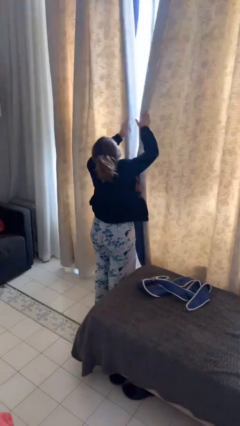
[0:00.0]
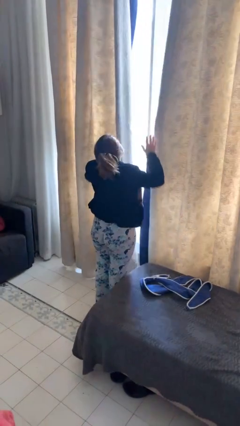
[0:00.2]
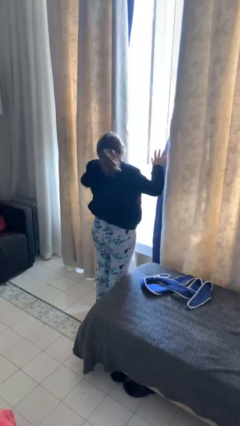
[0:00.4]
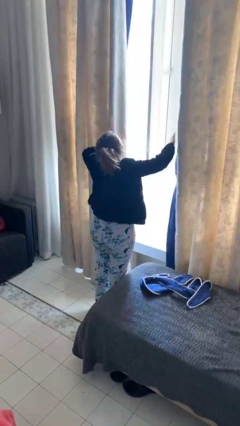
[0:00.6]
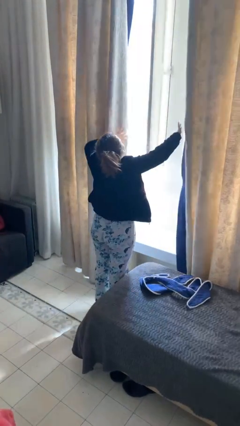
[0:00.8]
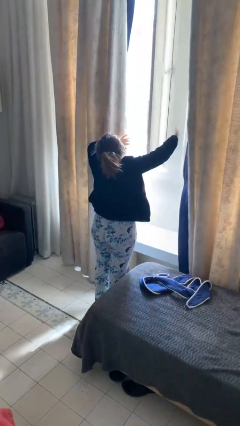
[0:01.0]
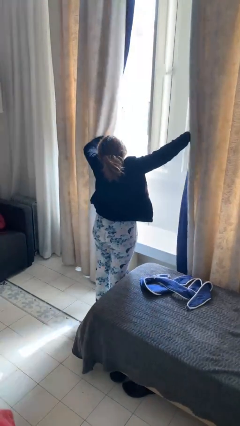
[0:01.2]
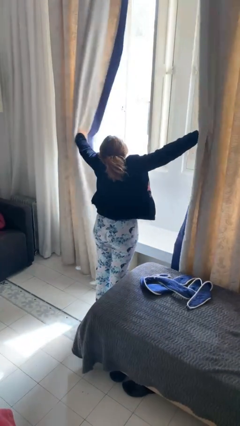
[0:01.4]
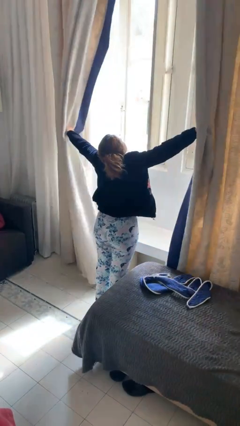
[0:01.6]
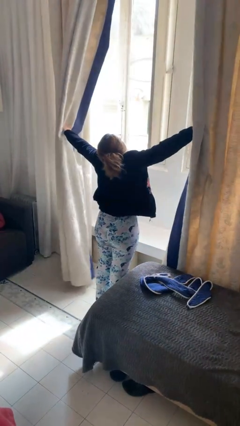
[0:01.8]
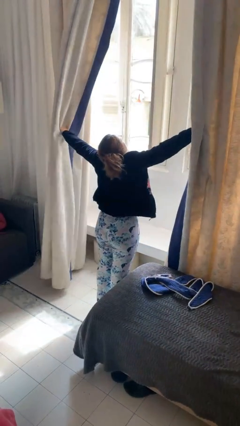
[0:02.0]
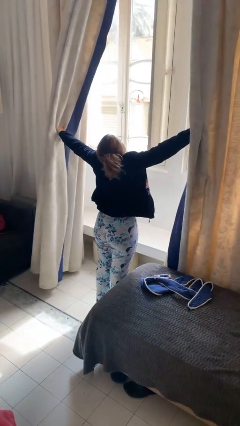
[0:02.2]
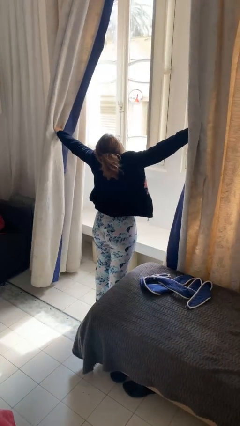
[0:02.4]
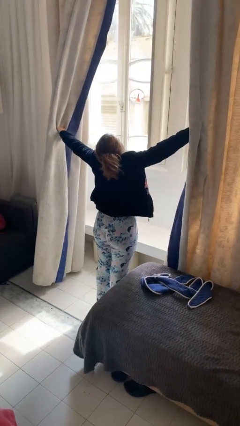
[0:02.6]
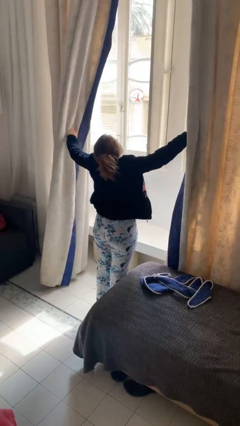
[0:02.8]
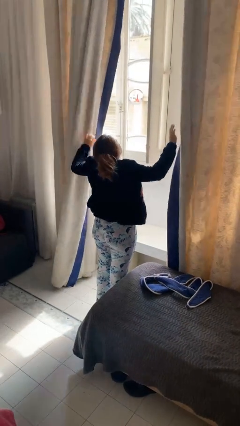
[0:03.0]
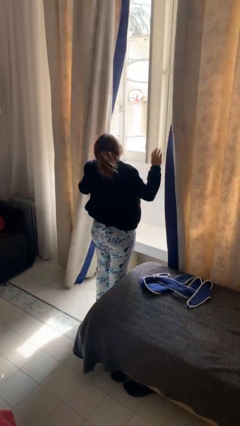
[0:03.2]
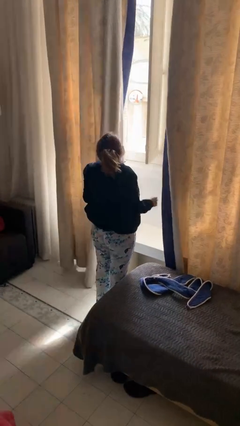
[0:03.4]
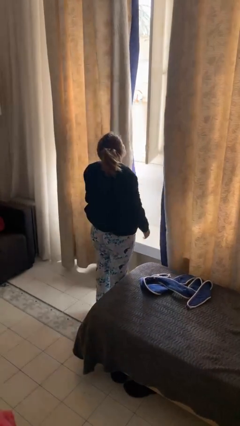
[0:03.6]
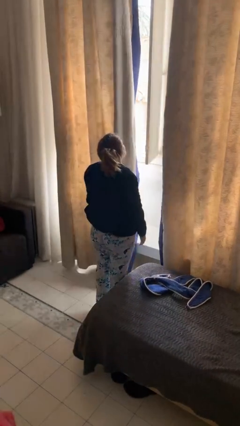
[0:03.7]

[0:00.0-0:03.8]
person opens curtains

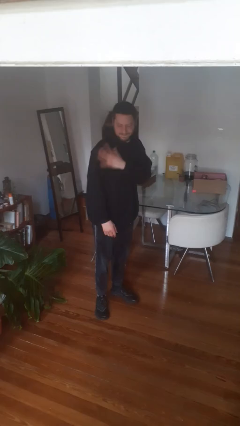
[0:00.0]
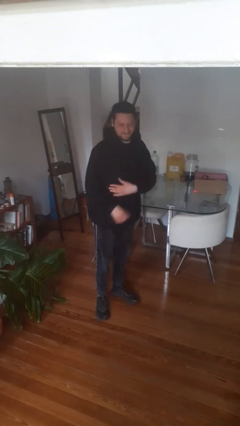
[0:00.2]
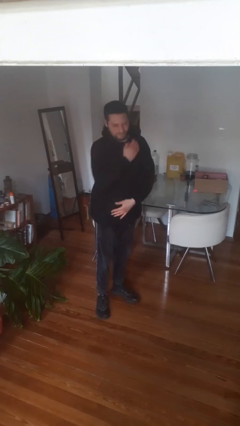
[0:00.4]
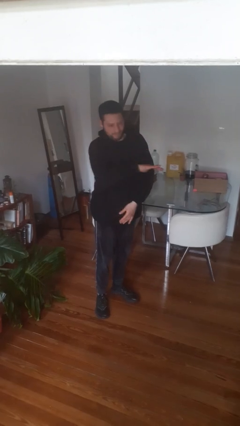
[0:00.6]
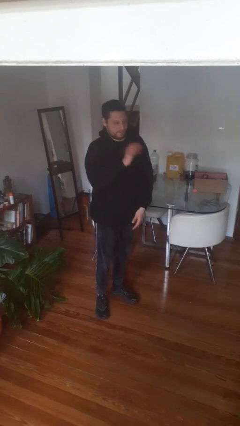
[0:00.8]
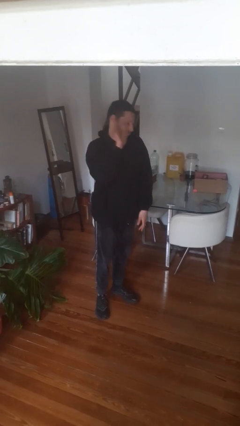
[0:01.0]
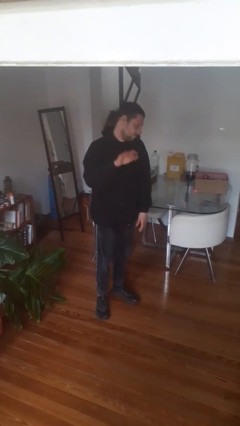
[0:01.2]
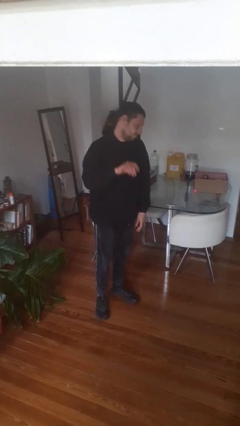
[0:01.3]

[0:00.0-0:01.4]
person swats bug

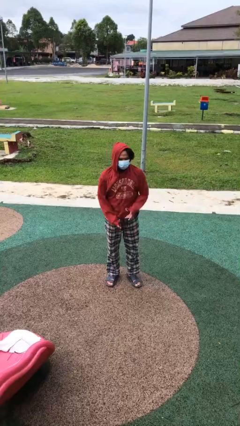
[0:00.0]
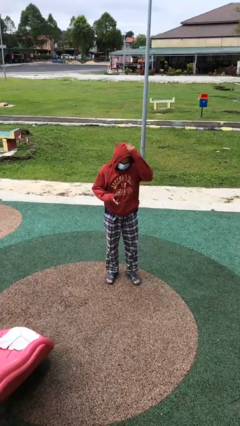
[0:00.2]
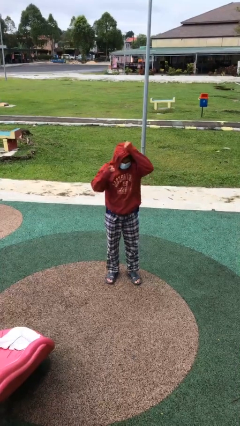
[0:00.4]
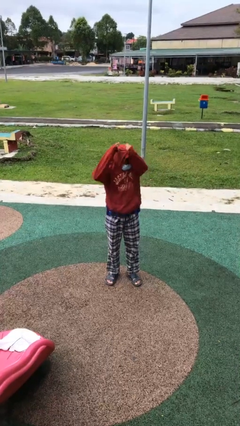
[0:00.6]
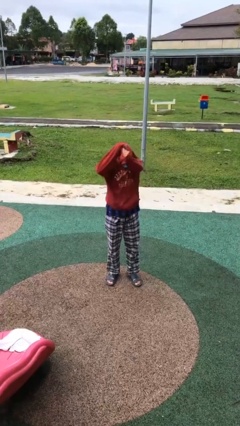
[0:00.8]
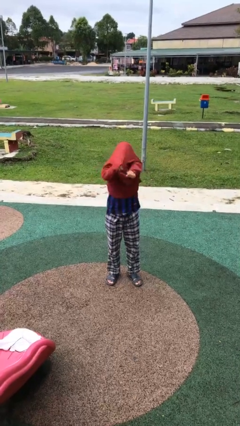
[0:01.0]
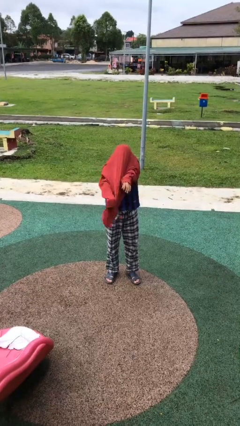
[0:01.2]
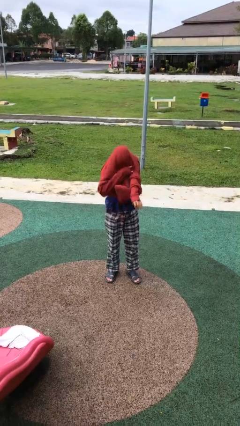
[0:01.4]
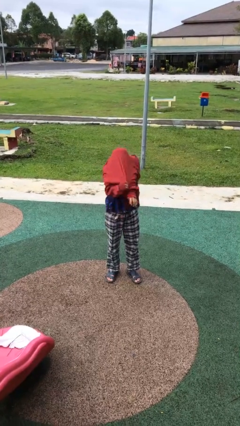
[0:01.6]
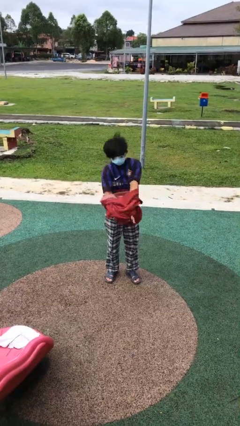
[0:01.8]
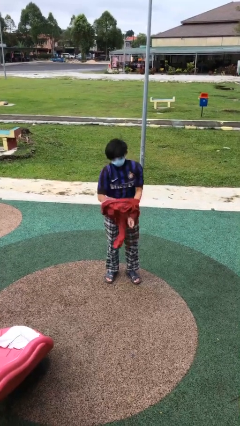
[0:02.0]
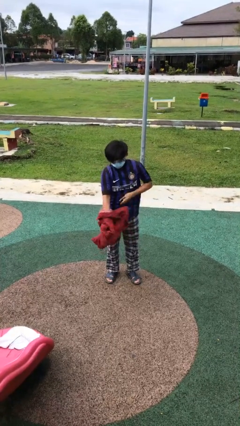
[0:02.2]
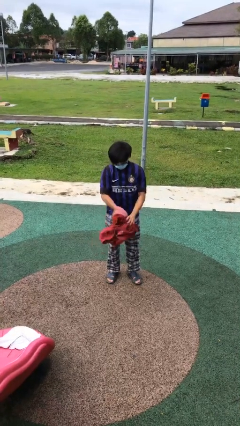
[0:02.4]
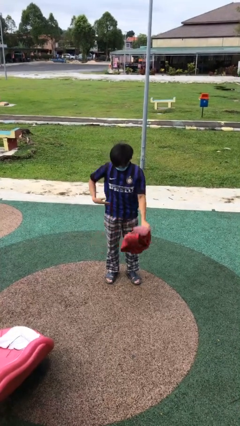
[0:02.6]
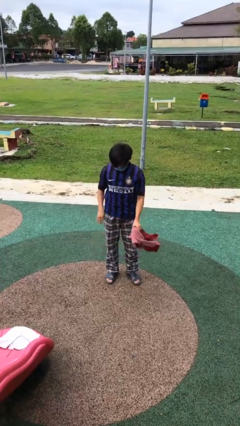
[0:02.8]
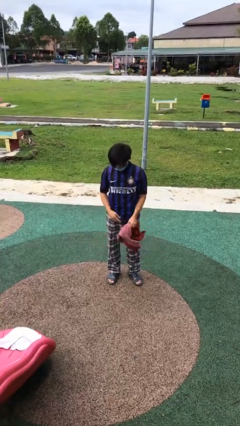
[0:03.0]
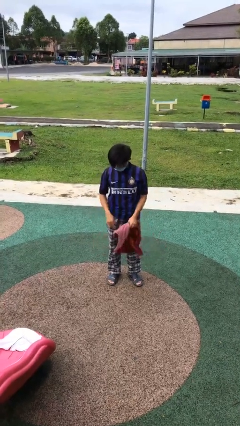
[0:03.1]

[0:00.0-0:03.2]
person takes off hoodie

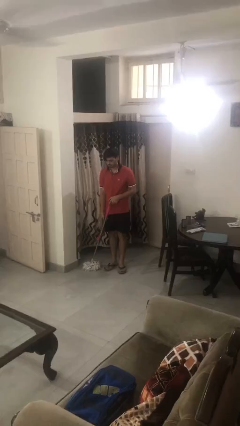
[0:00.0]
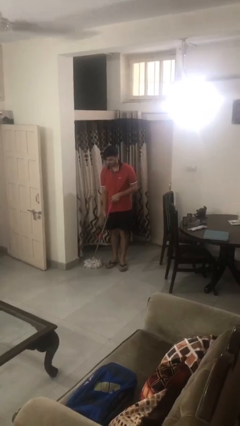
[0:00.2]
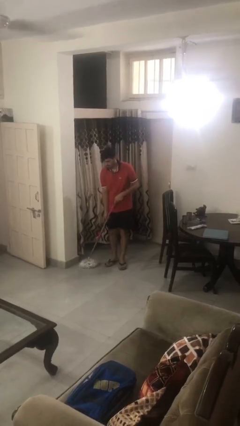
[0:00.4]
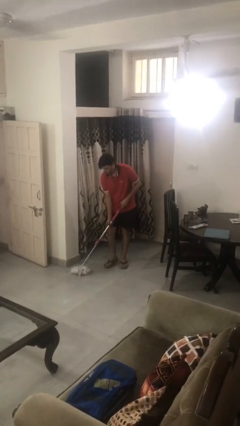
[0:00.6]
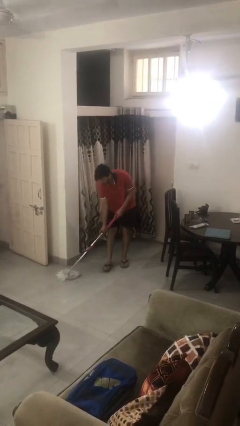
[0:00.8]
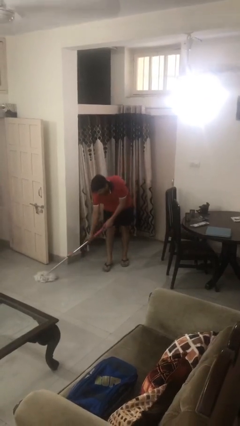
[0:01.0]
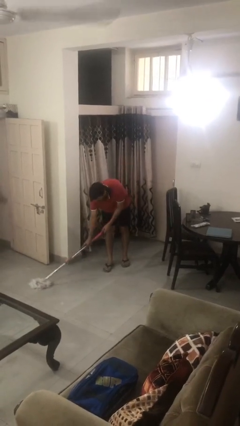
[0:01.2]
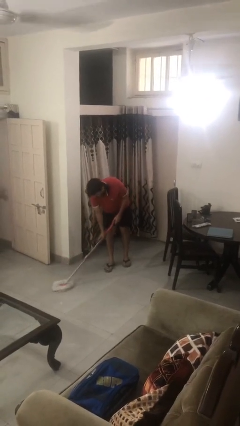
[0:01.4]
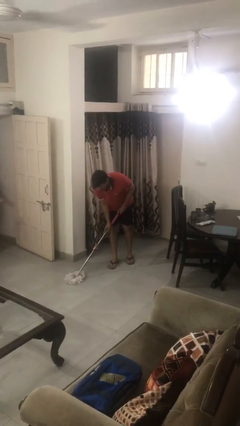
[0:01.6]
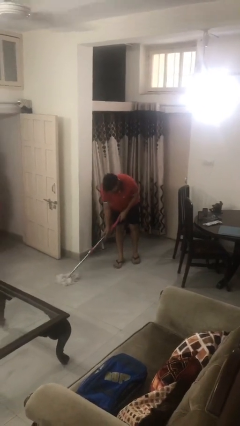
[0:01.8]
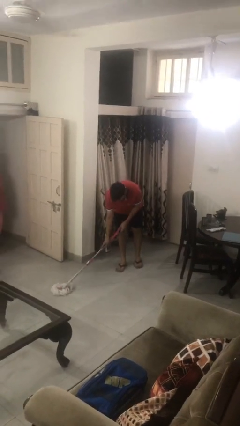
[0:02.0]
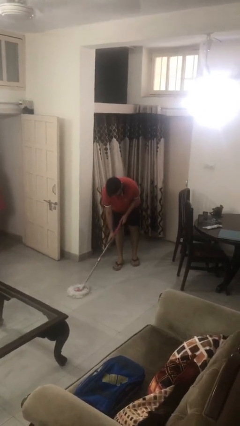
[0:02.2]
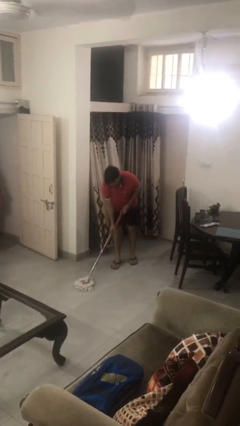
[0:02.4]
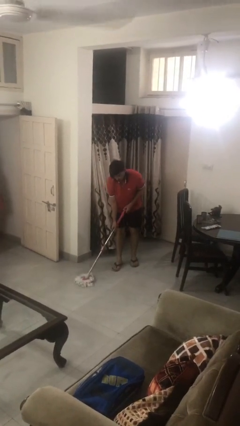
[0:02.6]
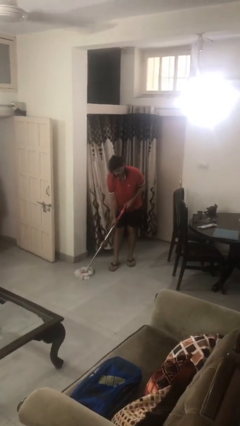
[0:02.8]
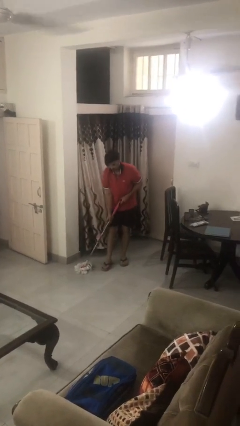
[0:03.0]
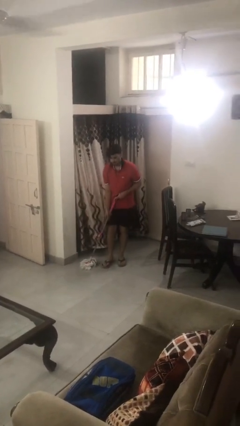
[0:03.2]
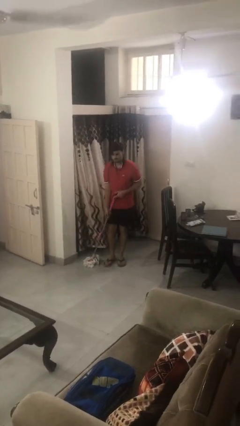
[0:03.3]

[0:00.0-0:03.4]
person mops

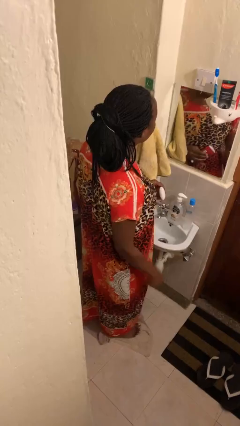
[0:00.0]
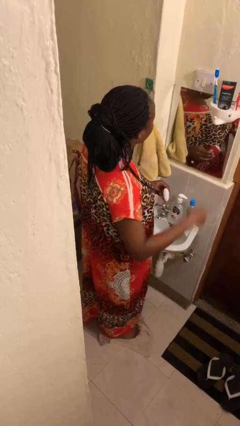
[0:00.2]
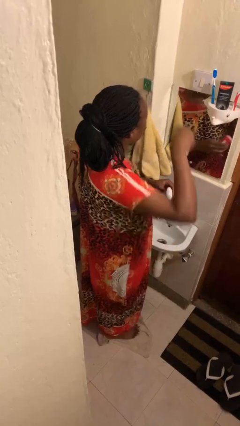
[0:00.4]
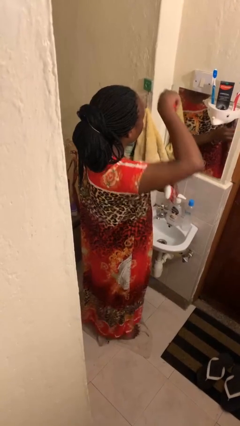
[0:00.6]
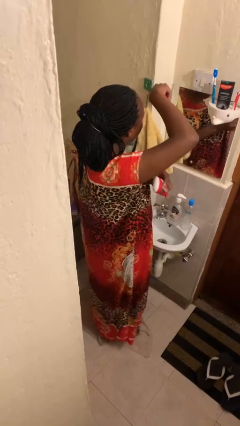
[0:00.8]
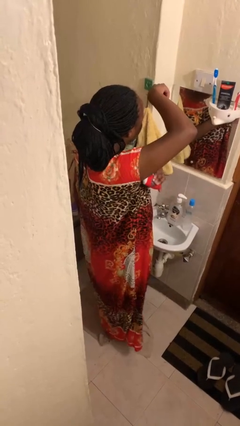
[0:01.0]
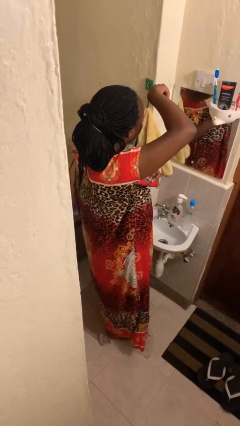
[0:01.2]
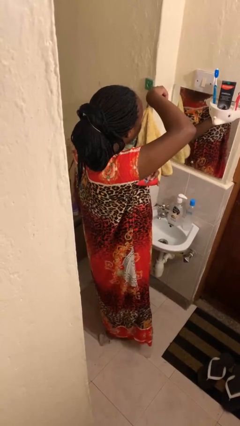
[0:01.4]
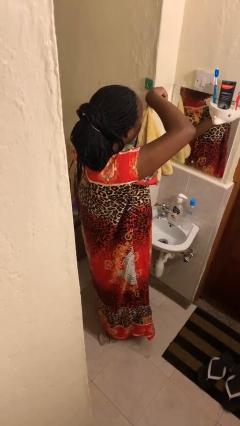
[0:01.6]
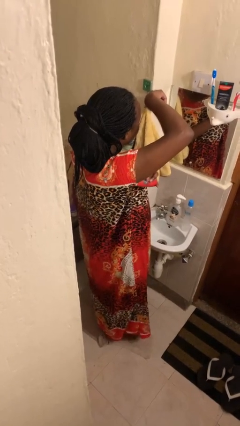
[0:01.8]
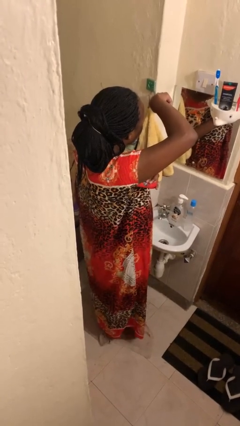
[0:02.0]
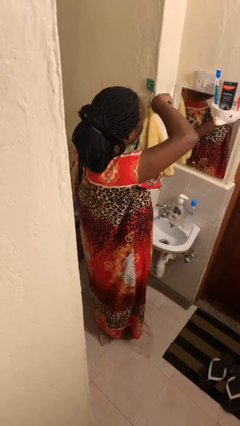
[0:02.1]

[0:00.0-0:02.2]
person applies deodorant

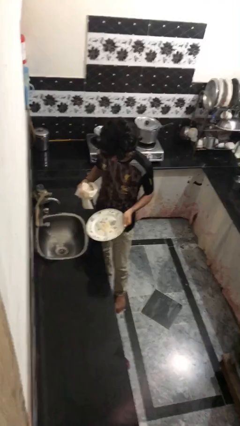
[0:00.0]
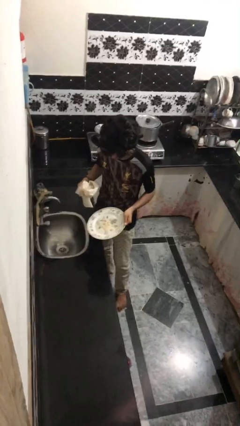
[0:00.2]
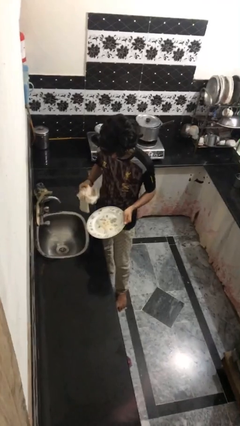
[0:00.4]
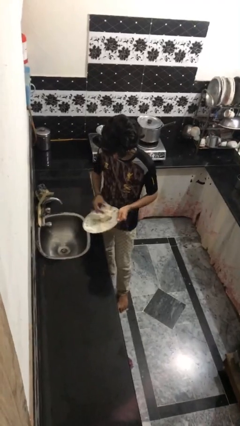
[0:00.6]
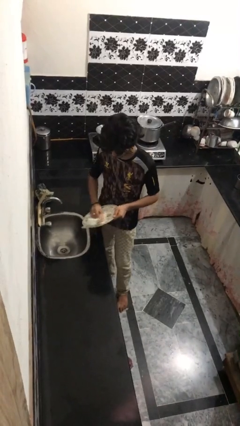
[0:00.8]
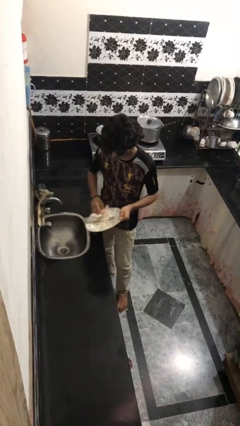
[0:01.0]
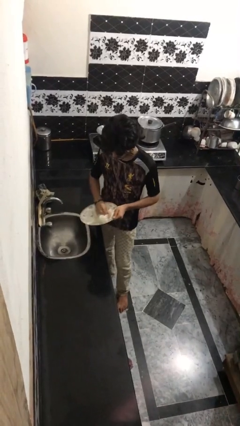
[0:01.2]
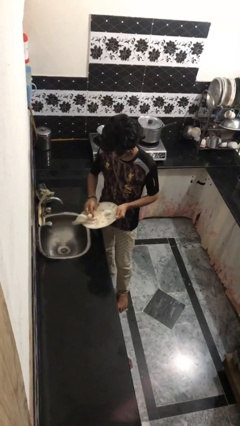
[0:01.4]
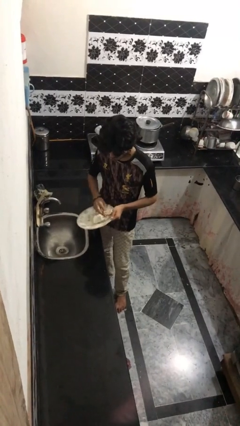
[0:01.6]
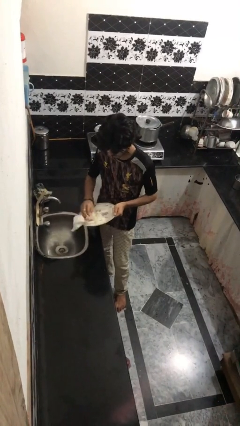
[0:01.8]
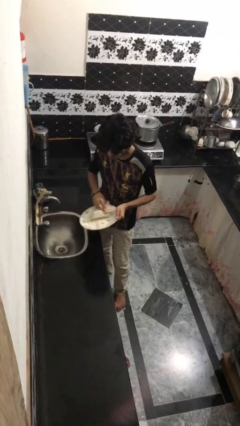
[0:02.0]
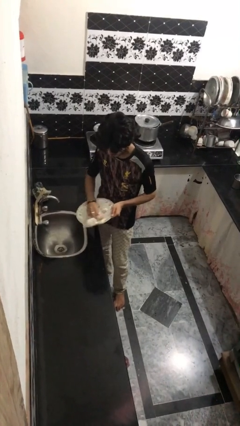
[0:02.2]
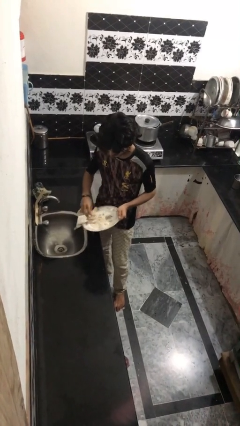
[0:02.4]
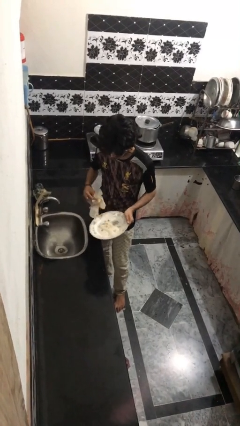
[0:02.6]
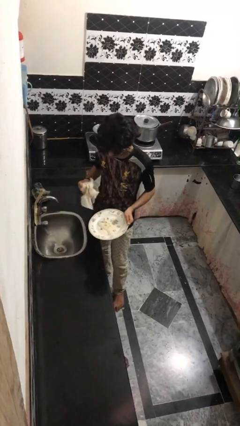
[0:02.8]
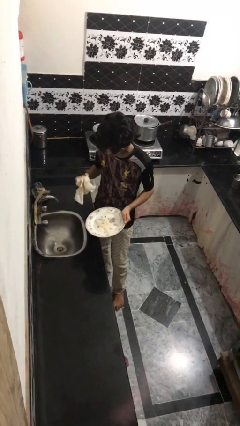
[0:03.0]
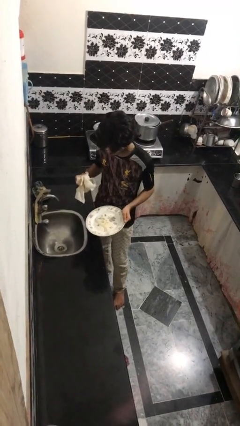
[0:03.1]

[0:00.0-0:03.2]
person dries dish
